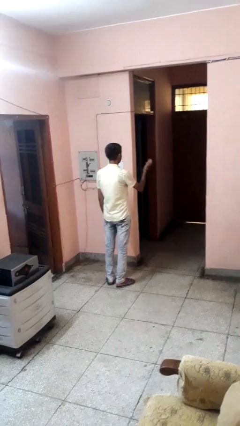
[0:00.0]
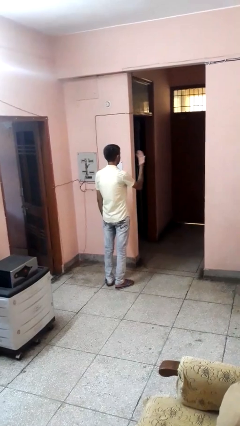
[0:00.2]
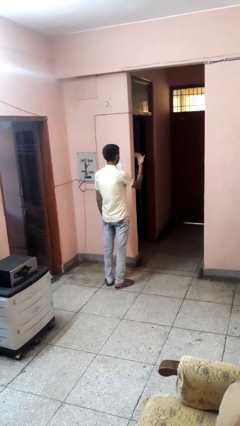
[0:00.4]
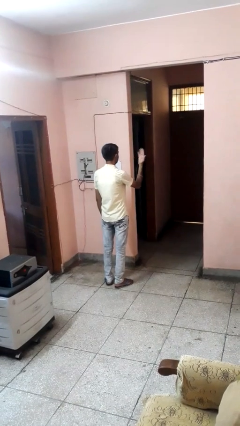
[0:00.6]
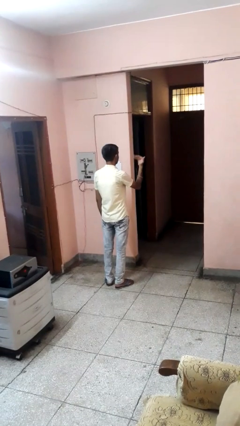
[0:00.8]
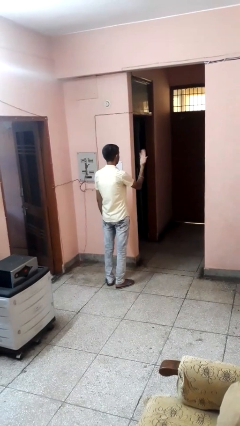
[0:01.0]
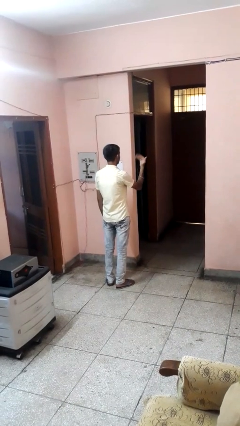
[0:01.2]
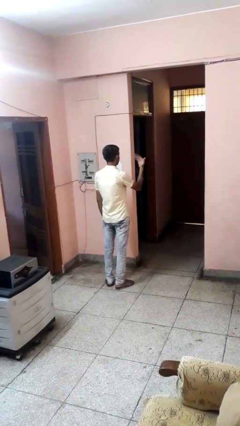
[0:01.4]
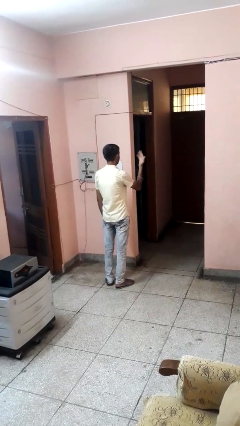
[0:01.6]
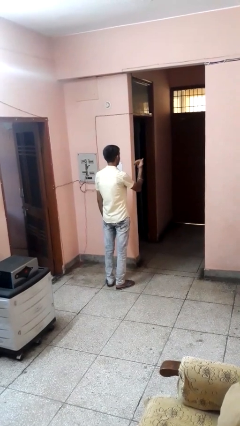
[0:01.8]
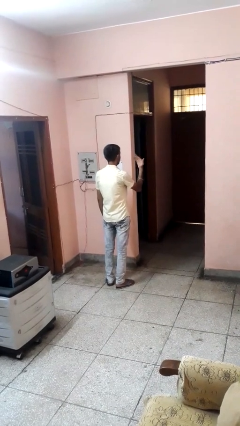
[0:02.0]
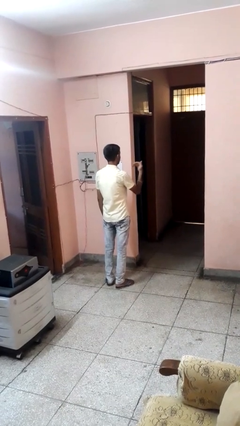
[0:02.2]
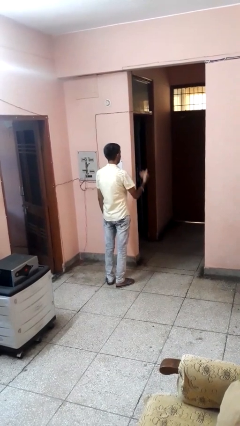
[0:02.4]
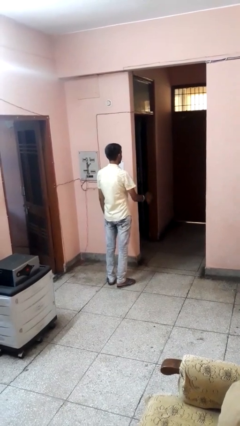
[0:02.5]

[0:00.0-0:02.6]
person gestures come here

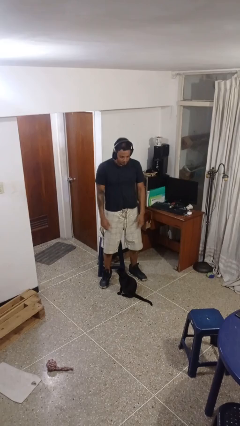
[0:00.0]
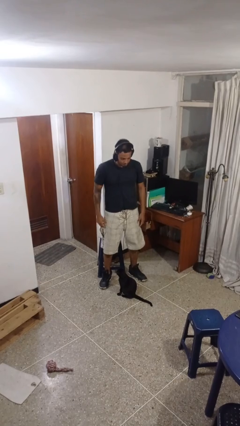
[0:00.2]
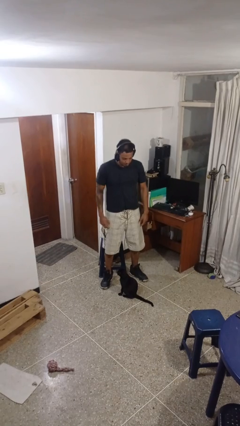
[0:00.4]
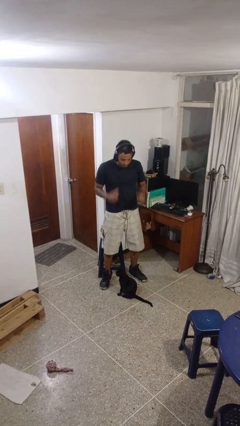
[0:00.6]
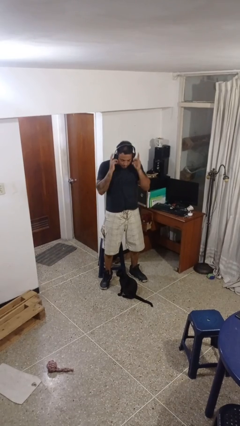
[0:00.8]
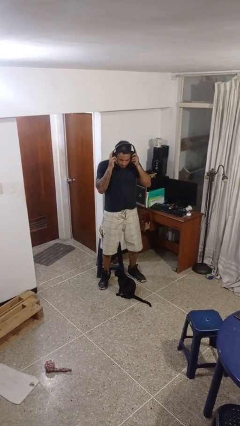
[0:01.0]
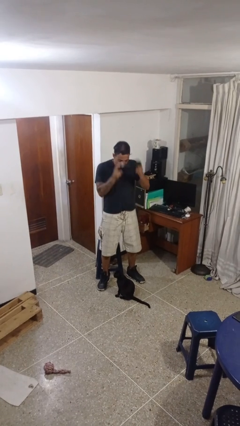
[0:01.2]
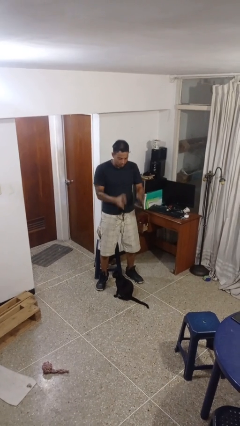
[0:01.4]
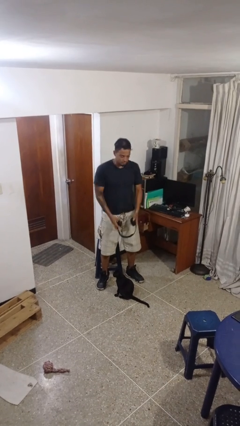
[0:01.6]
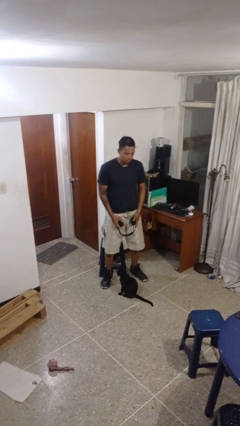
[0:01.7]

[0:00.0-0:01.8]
person takes off headphones

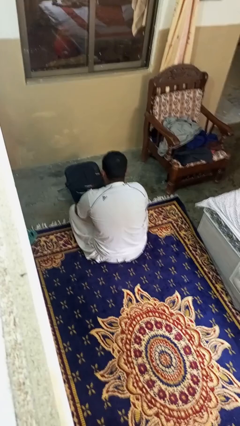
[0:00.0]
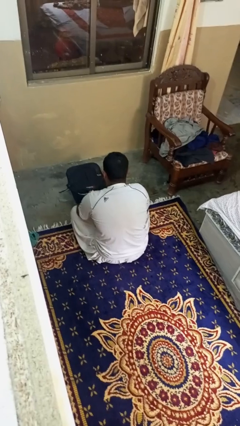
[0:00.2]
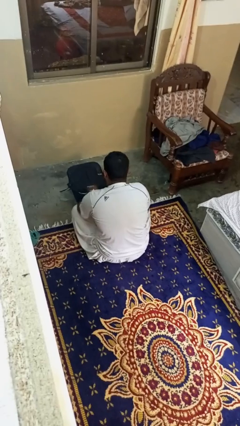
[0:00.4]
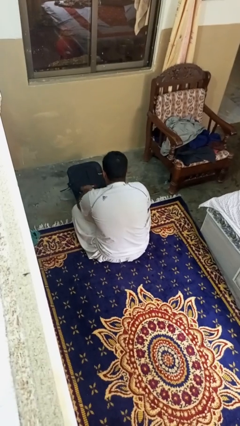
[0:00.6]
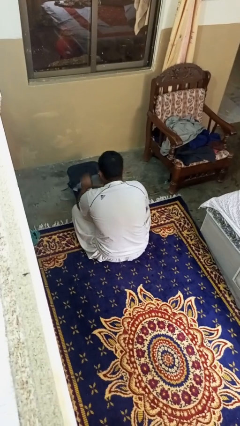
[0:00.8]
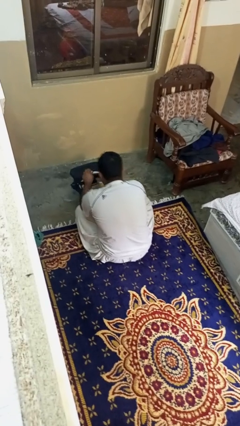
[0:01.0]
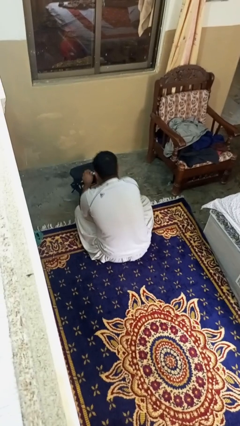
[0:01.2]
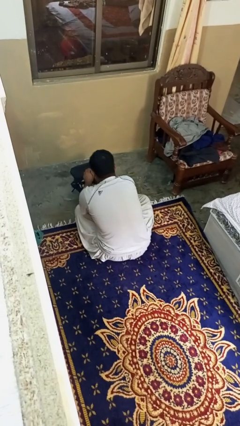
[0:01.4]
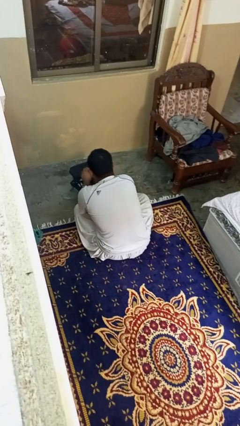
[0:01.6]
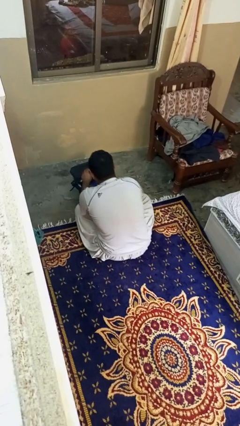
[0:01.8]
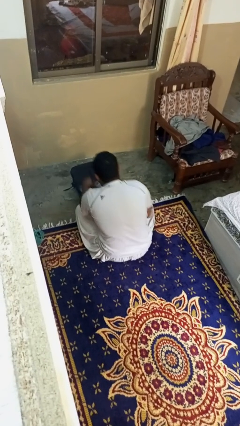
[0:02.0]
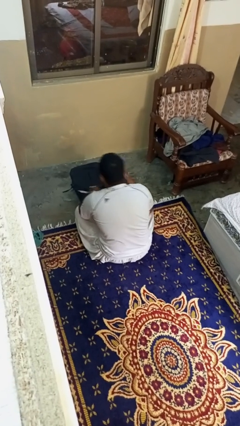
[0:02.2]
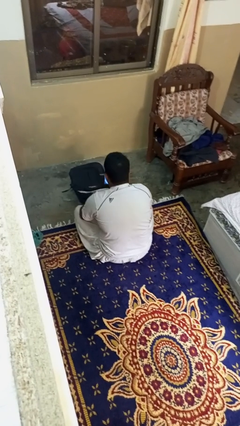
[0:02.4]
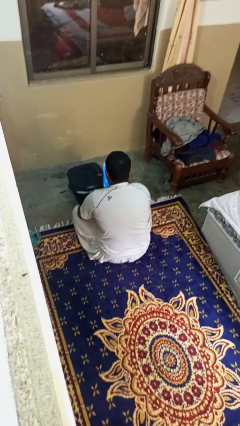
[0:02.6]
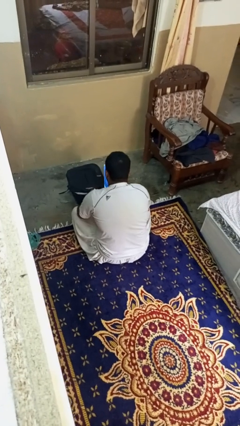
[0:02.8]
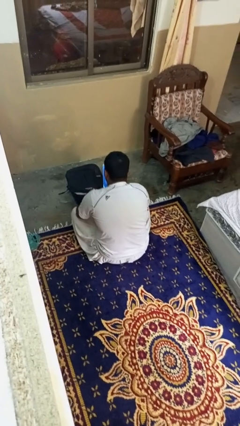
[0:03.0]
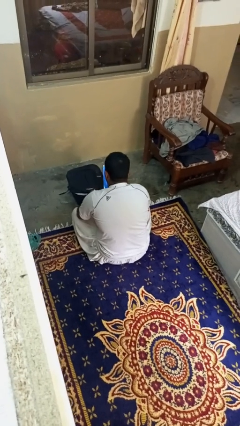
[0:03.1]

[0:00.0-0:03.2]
person takes object from bag

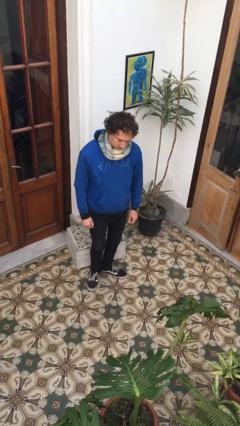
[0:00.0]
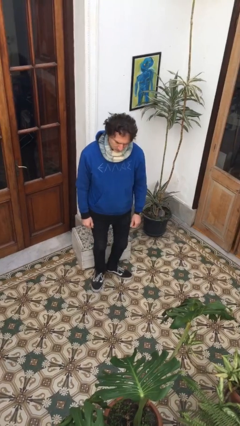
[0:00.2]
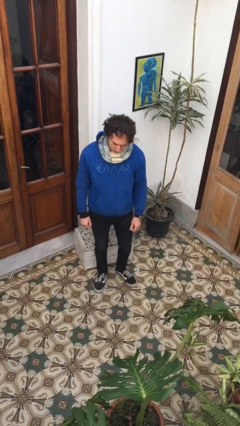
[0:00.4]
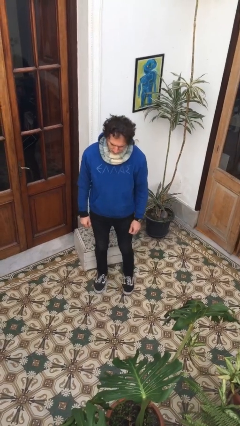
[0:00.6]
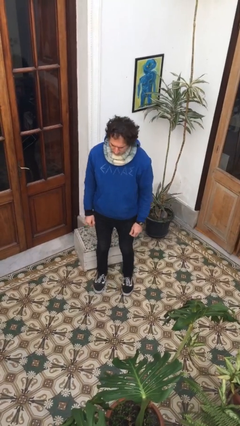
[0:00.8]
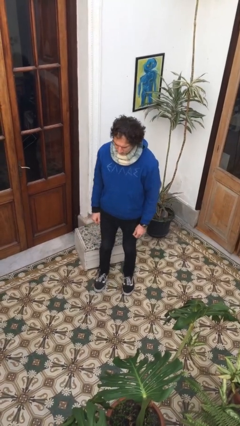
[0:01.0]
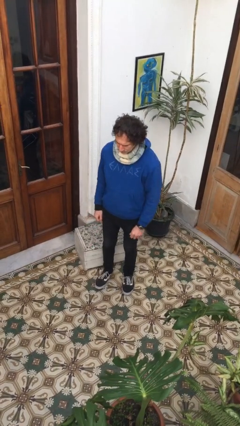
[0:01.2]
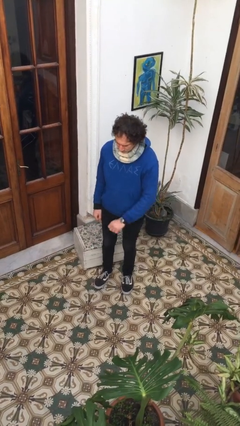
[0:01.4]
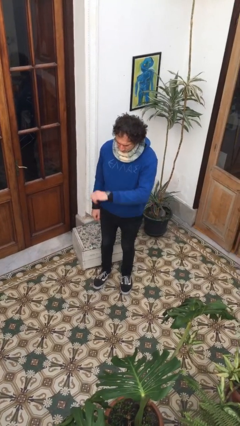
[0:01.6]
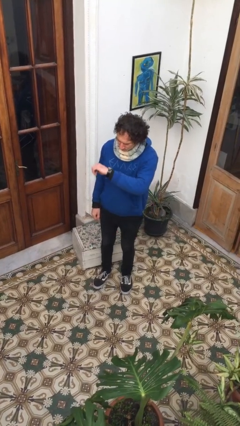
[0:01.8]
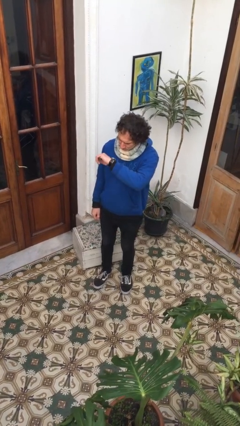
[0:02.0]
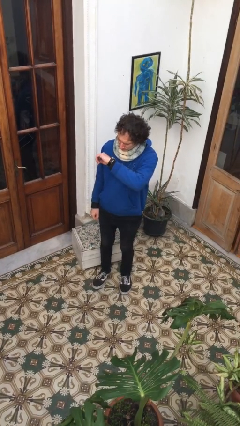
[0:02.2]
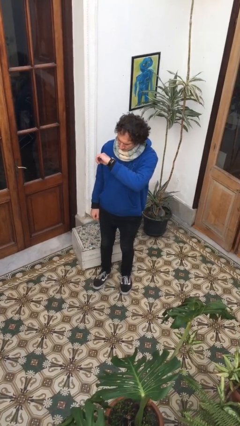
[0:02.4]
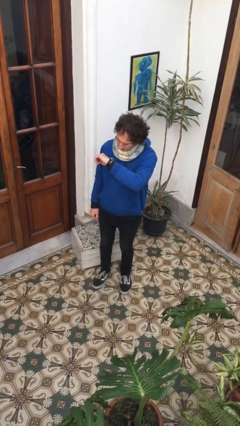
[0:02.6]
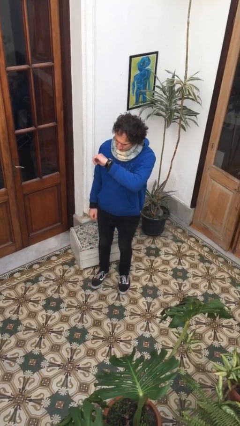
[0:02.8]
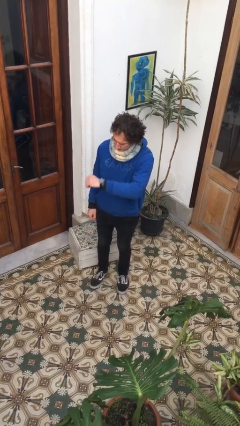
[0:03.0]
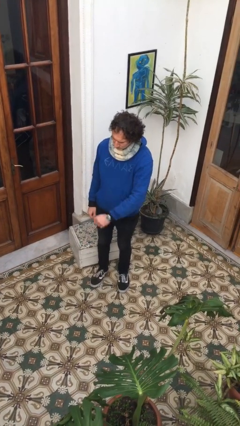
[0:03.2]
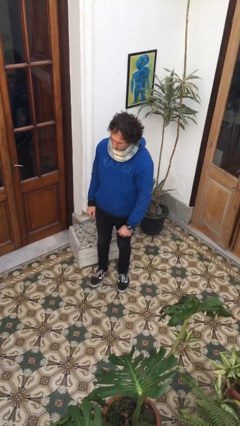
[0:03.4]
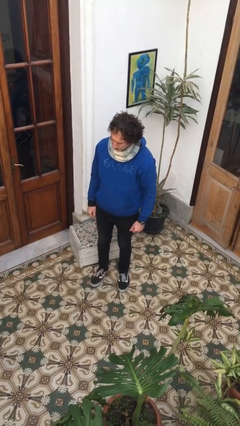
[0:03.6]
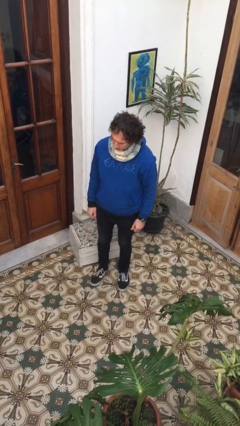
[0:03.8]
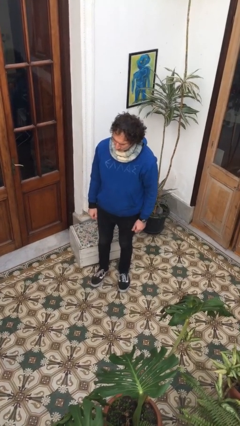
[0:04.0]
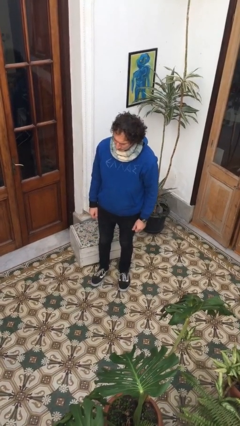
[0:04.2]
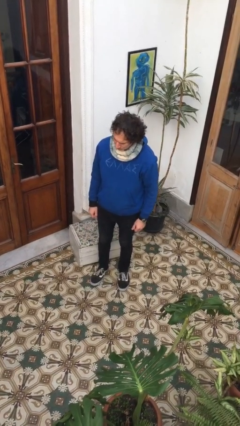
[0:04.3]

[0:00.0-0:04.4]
person looks at wristwatch

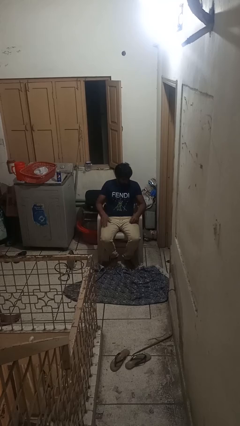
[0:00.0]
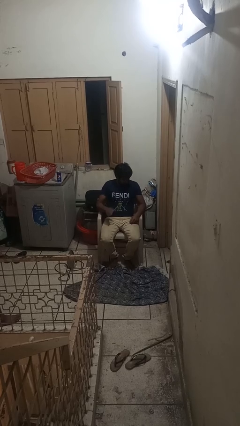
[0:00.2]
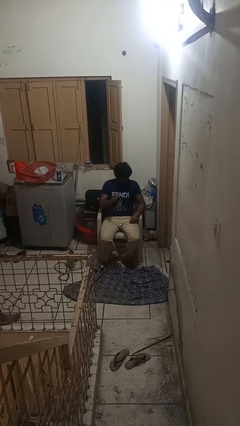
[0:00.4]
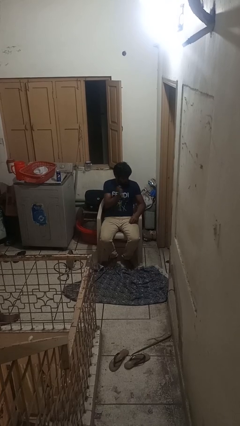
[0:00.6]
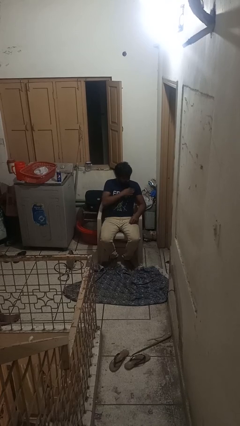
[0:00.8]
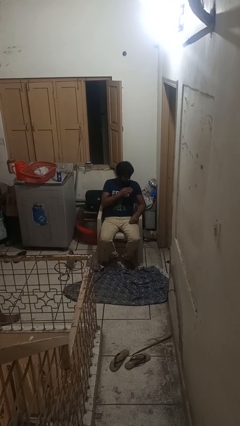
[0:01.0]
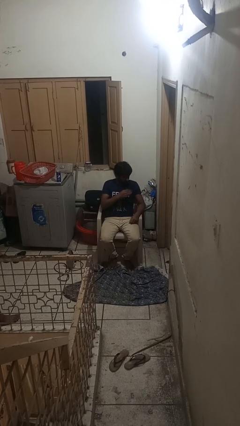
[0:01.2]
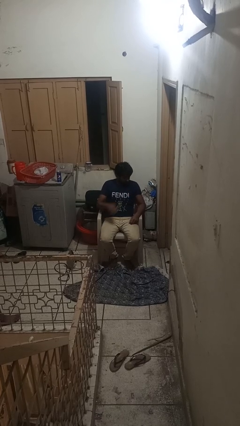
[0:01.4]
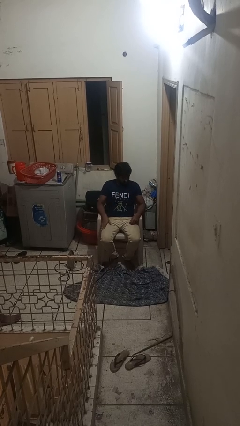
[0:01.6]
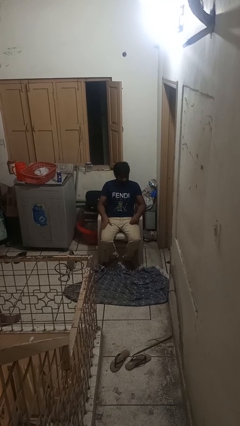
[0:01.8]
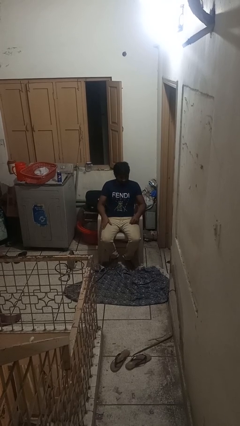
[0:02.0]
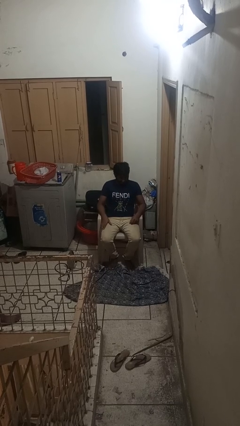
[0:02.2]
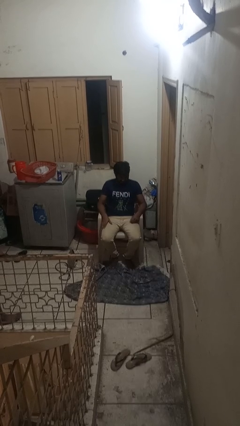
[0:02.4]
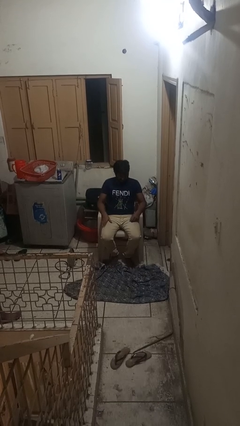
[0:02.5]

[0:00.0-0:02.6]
person swats bug

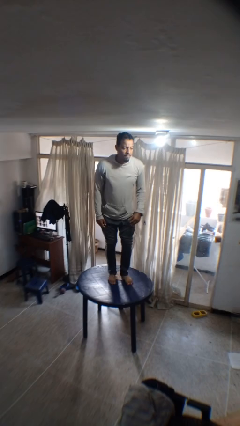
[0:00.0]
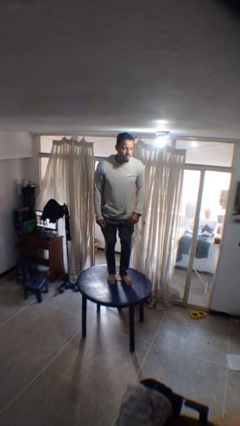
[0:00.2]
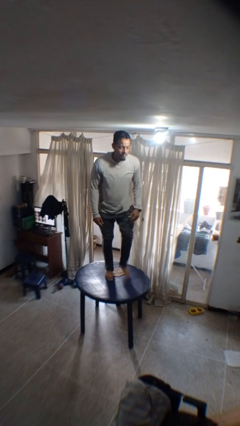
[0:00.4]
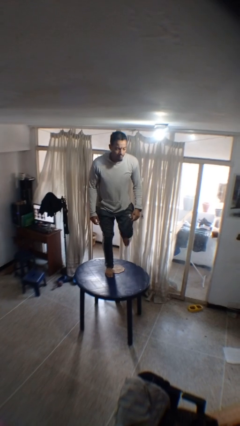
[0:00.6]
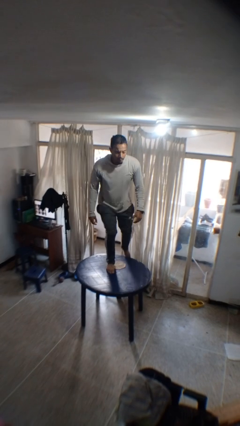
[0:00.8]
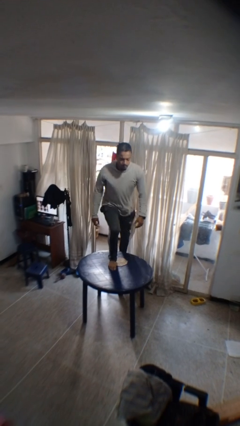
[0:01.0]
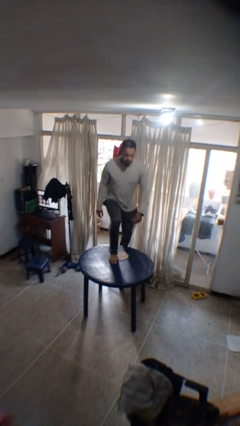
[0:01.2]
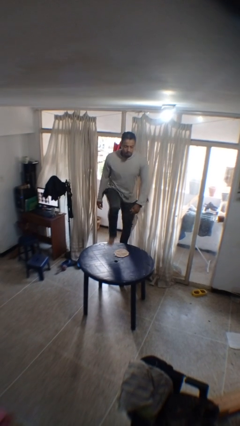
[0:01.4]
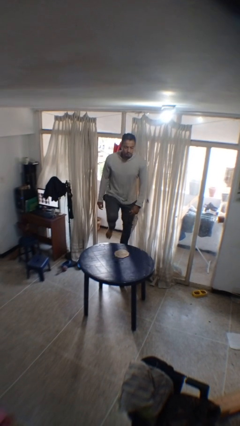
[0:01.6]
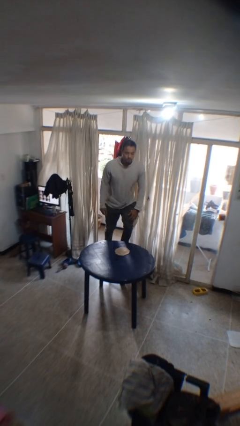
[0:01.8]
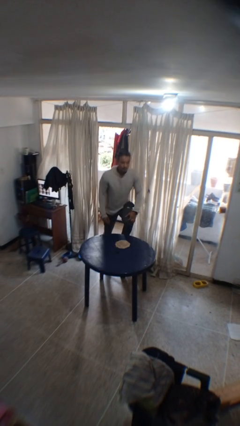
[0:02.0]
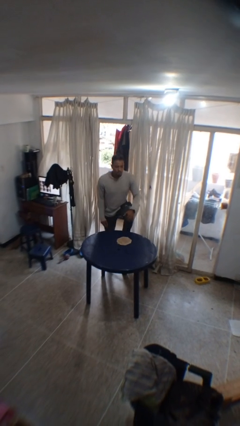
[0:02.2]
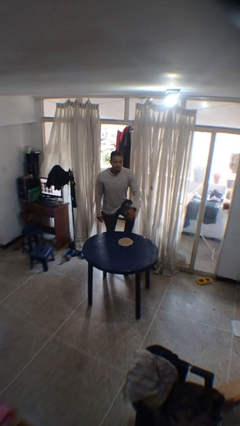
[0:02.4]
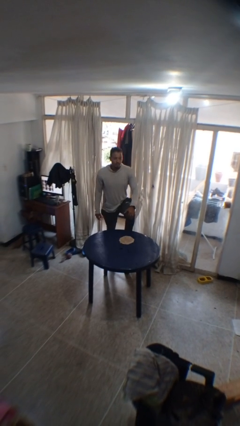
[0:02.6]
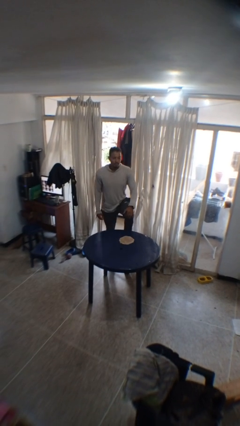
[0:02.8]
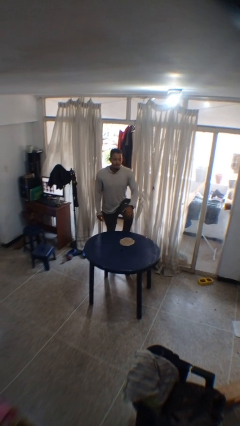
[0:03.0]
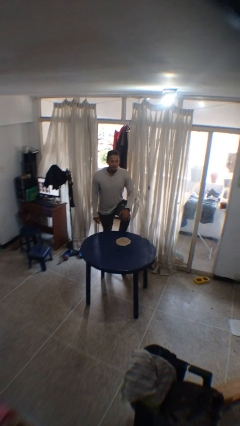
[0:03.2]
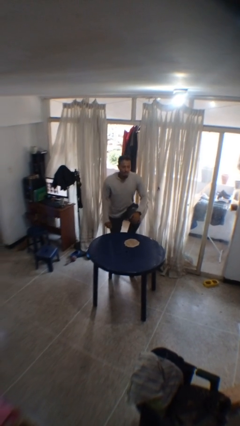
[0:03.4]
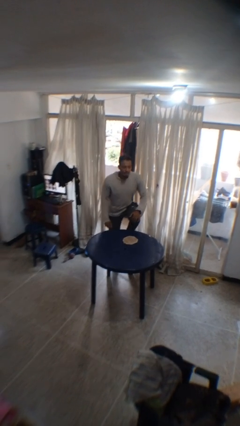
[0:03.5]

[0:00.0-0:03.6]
person climbs off table
